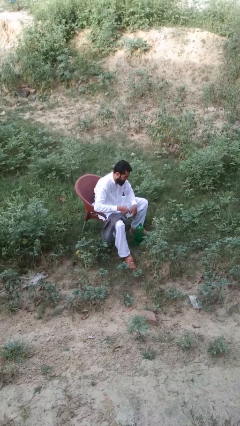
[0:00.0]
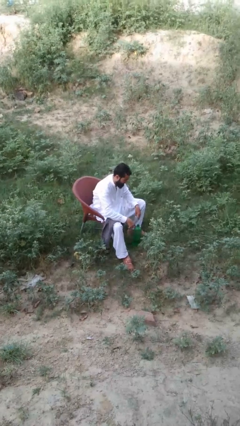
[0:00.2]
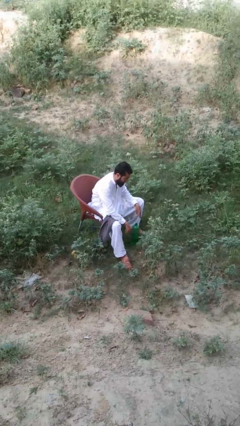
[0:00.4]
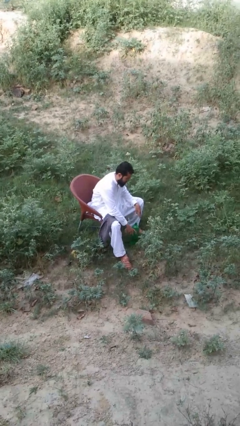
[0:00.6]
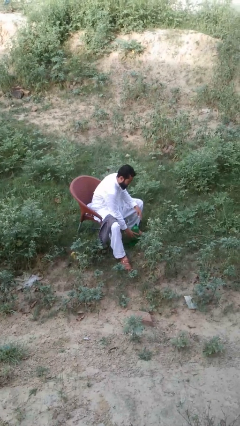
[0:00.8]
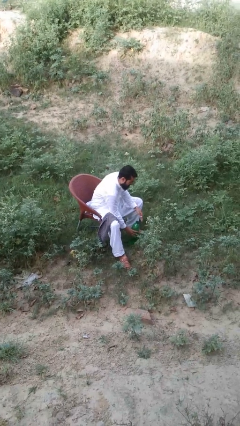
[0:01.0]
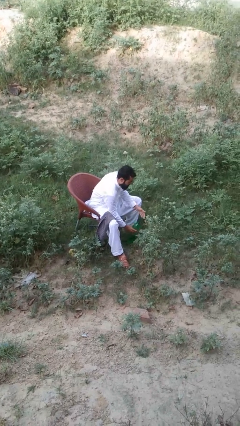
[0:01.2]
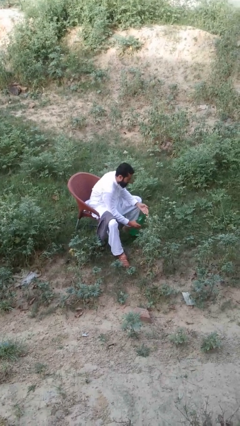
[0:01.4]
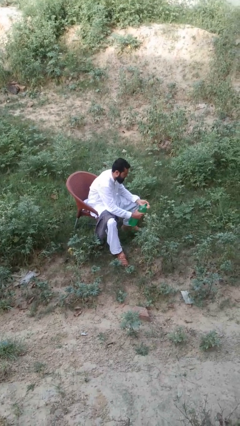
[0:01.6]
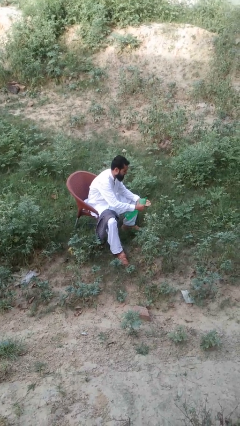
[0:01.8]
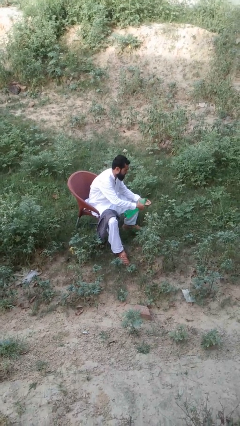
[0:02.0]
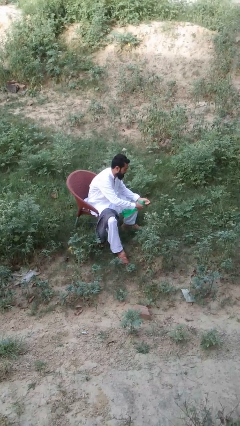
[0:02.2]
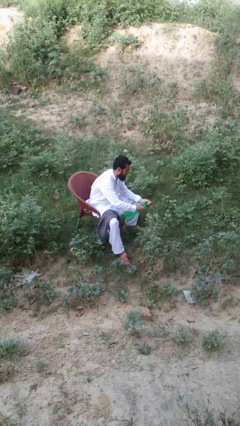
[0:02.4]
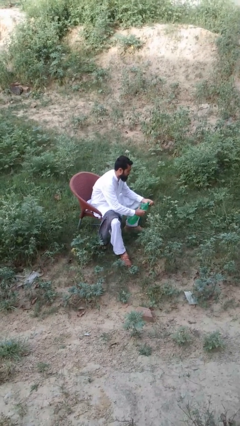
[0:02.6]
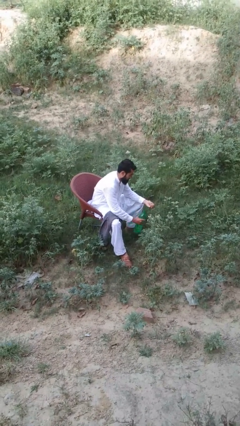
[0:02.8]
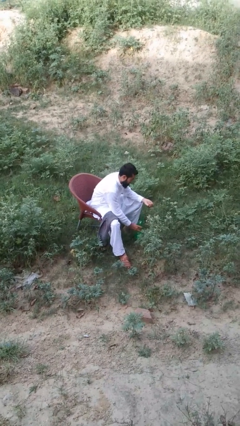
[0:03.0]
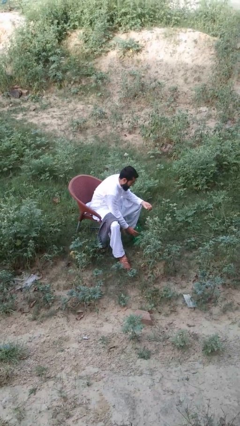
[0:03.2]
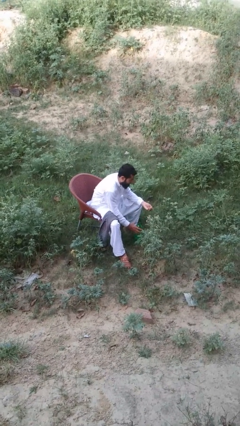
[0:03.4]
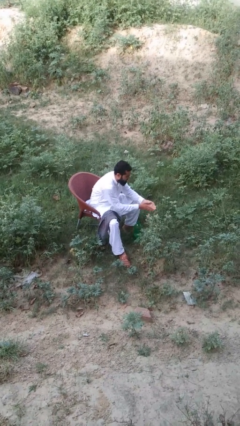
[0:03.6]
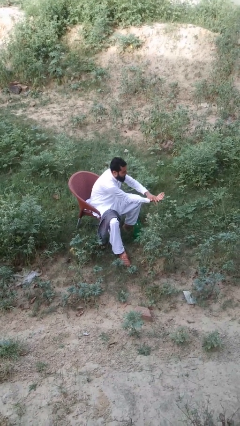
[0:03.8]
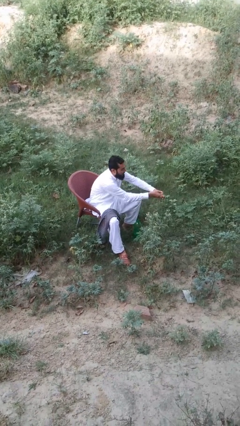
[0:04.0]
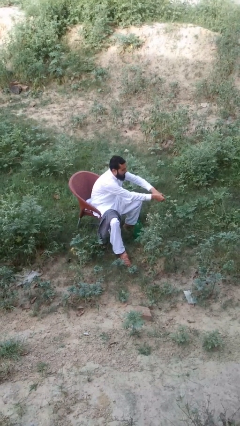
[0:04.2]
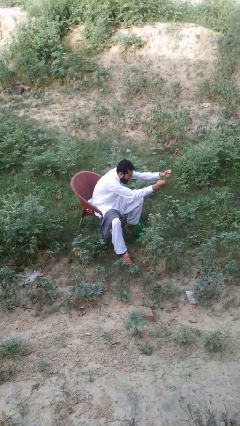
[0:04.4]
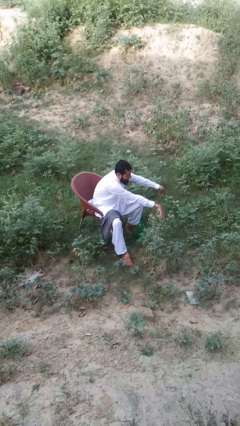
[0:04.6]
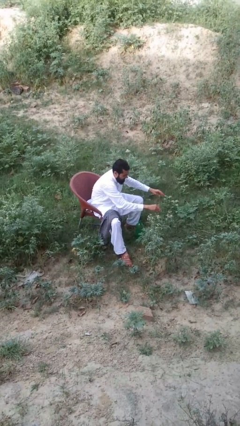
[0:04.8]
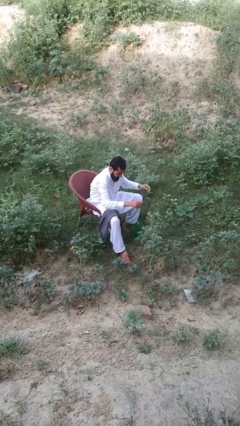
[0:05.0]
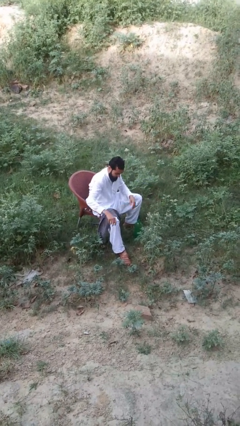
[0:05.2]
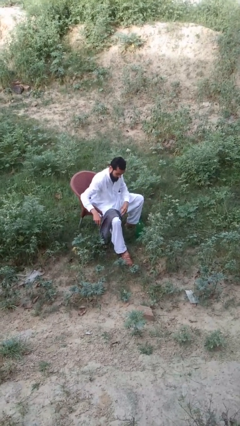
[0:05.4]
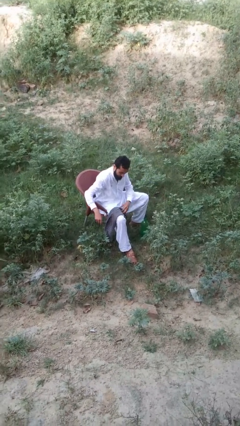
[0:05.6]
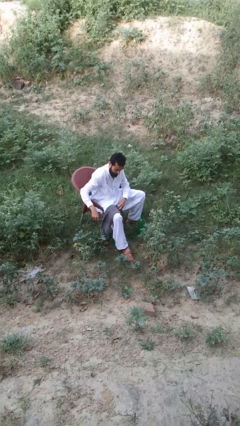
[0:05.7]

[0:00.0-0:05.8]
person washes hands

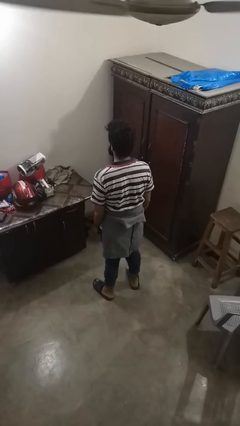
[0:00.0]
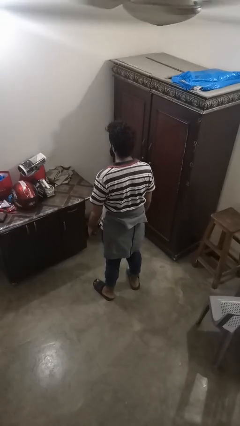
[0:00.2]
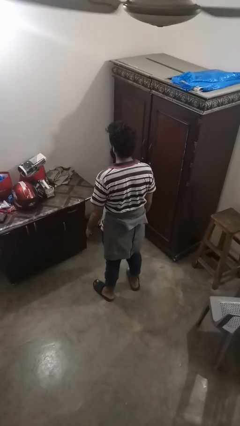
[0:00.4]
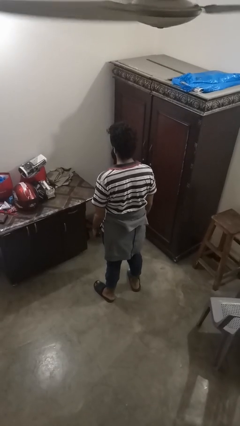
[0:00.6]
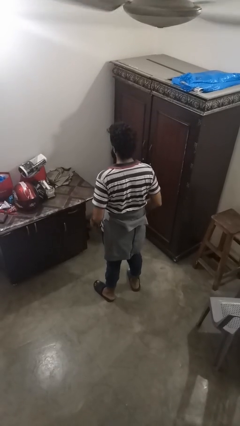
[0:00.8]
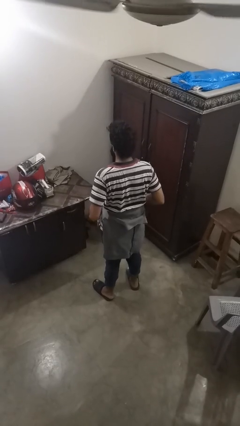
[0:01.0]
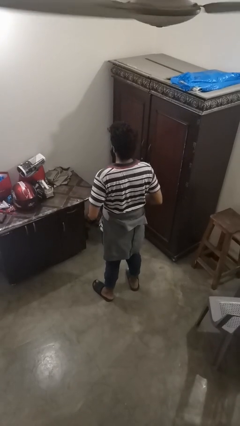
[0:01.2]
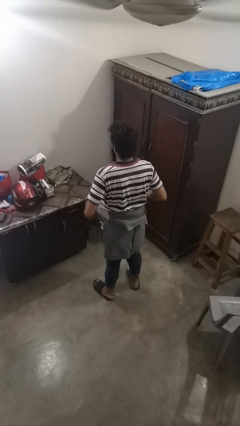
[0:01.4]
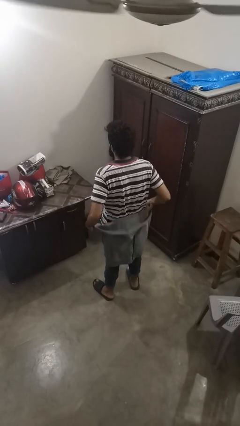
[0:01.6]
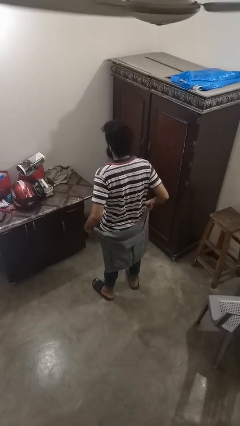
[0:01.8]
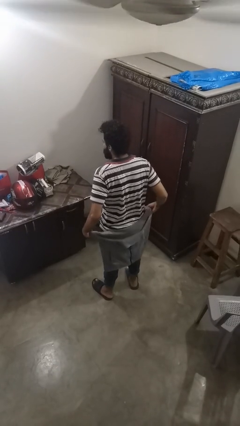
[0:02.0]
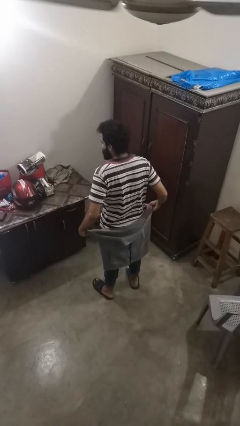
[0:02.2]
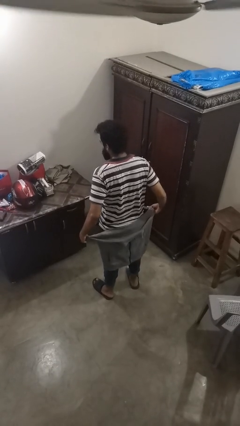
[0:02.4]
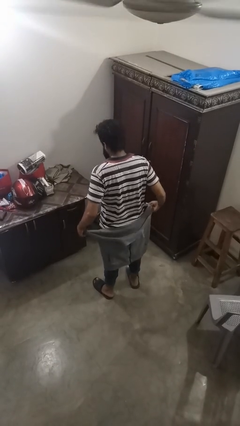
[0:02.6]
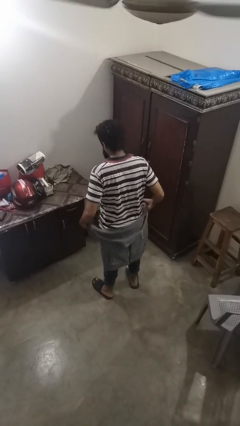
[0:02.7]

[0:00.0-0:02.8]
person unties jacket around waist

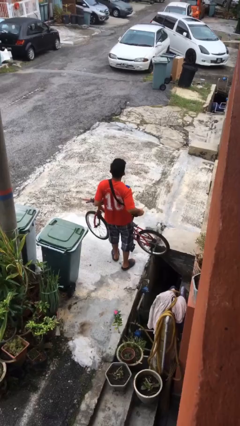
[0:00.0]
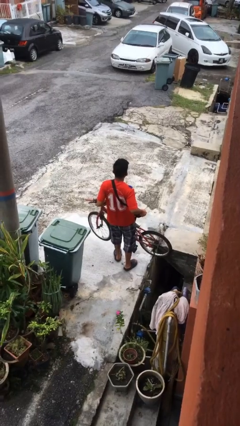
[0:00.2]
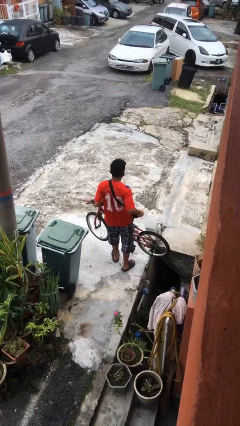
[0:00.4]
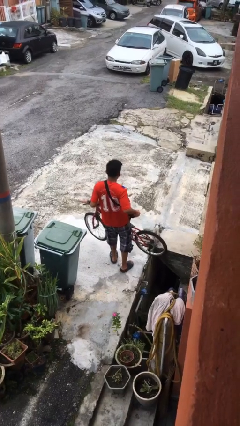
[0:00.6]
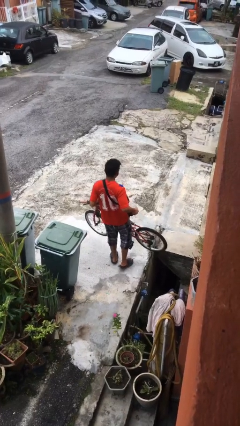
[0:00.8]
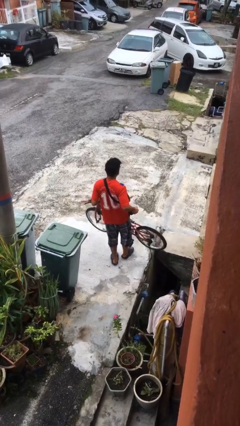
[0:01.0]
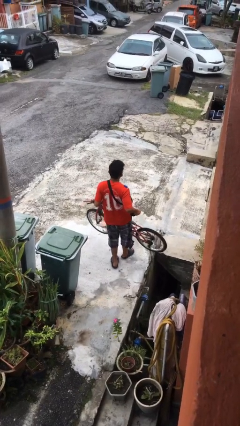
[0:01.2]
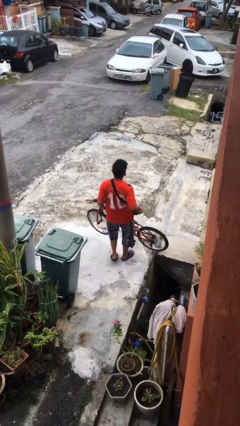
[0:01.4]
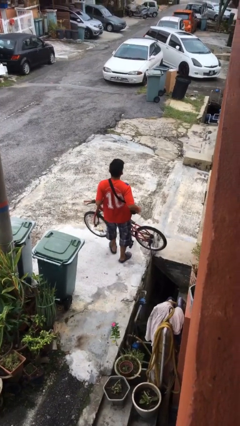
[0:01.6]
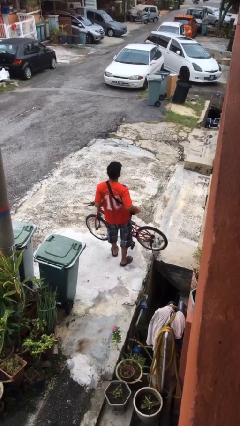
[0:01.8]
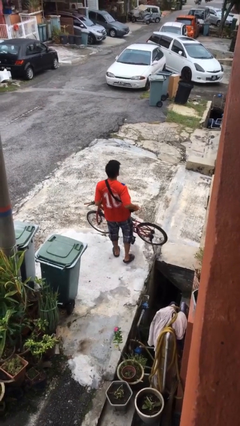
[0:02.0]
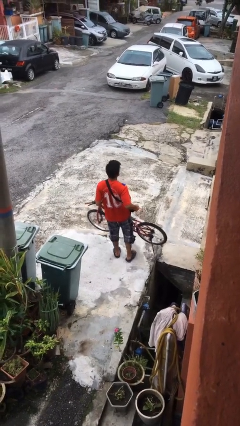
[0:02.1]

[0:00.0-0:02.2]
person carries bicycle

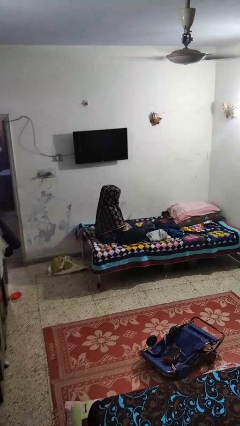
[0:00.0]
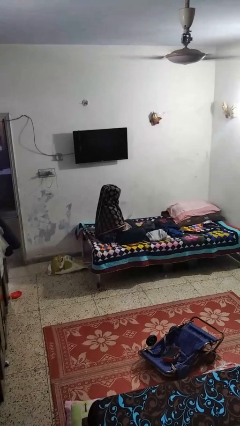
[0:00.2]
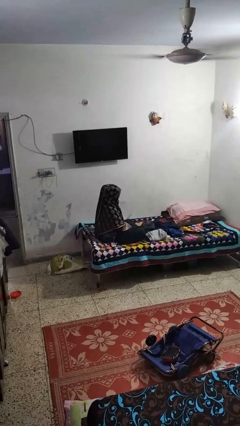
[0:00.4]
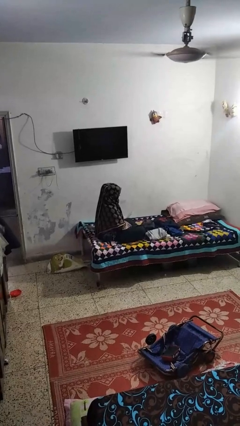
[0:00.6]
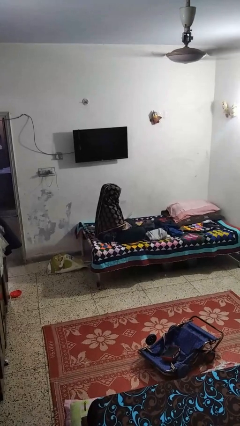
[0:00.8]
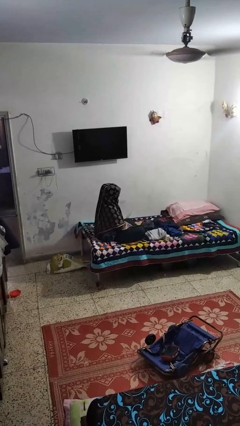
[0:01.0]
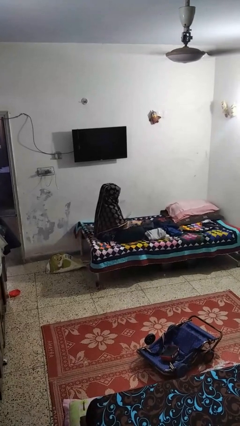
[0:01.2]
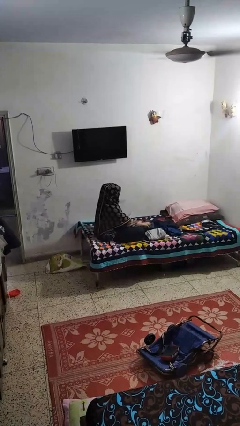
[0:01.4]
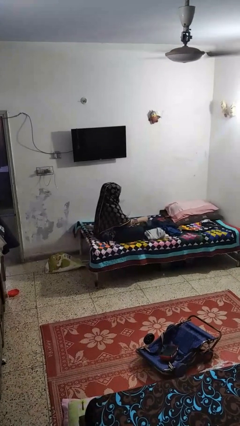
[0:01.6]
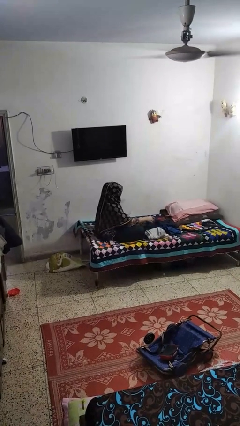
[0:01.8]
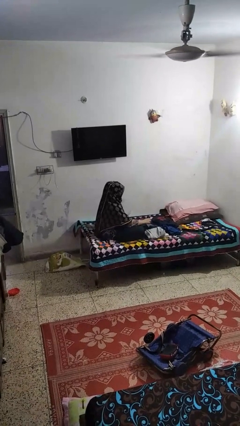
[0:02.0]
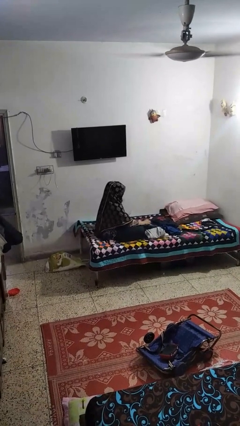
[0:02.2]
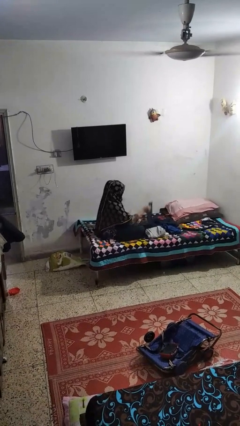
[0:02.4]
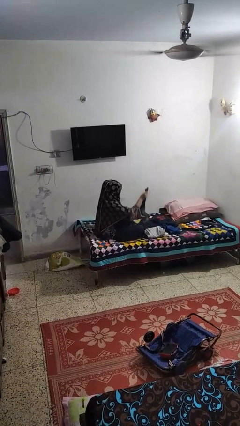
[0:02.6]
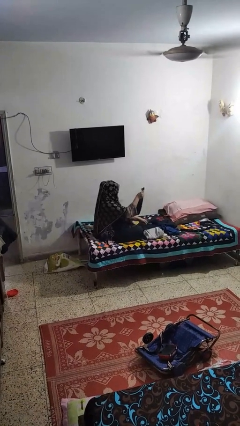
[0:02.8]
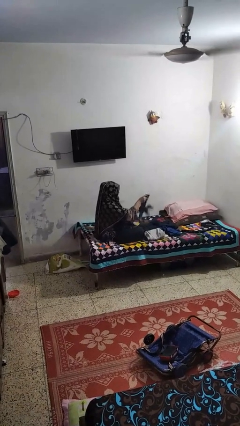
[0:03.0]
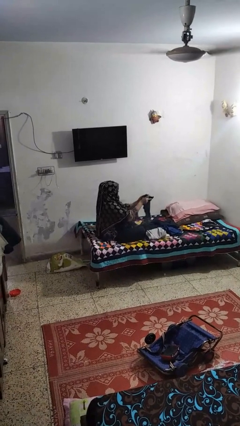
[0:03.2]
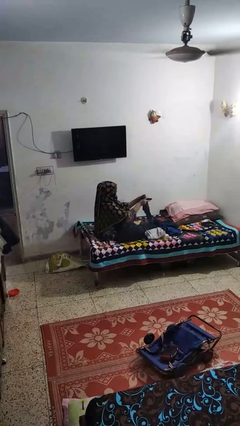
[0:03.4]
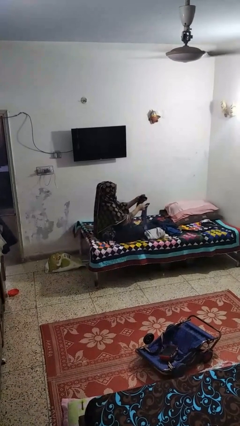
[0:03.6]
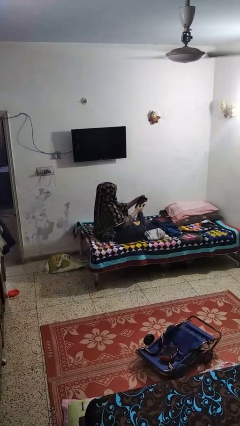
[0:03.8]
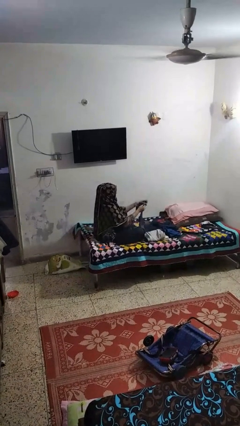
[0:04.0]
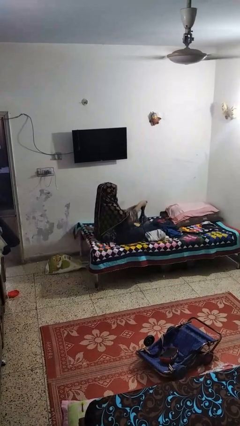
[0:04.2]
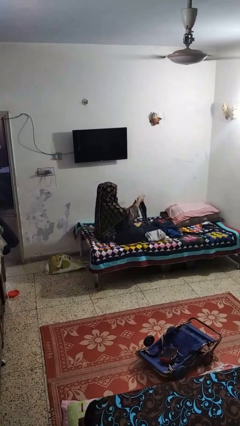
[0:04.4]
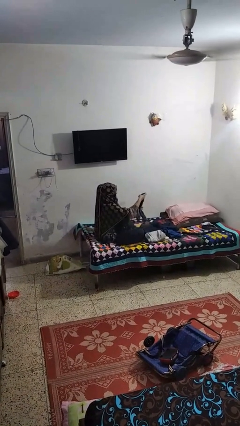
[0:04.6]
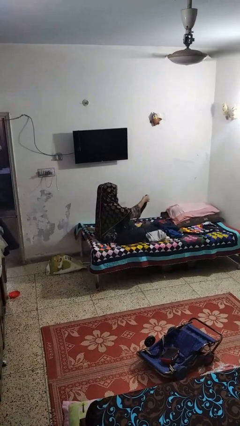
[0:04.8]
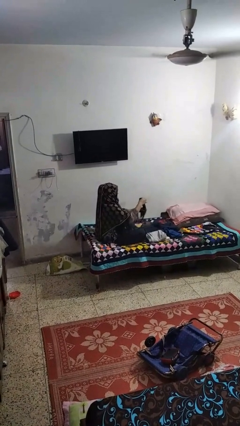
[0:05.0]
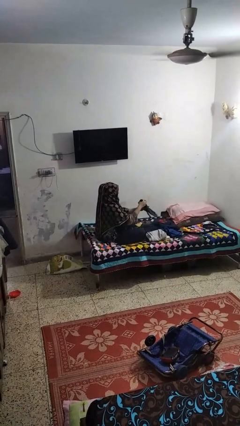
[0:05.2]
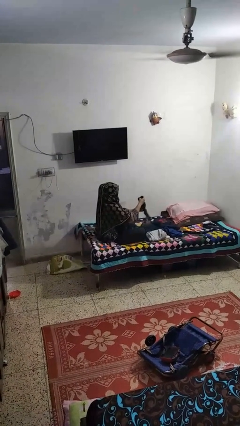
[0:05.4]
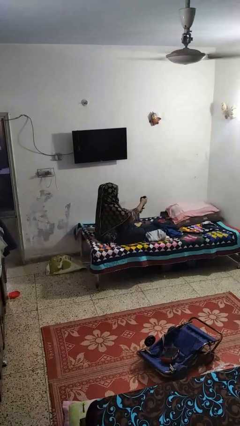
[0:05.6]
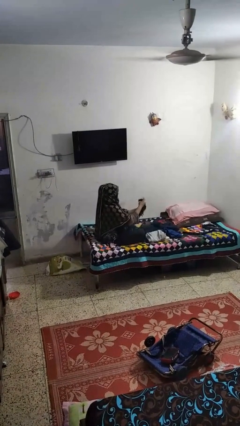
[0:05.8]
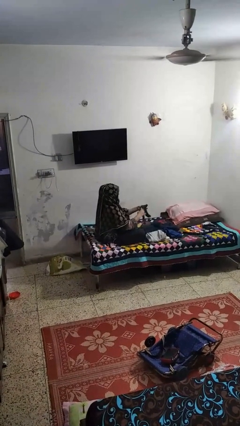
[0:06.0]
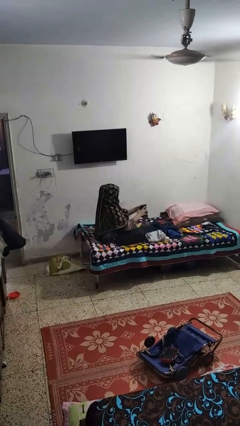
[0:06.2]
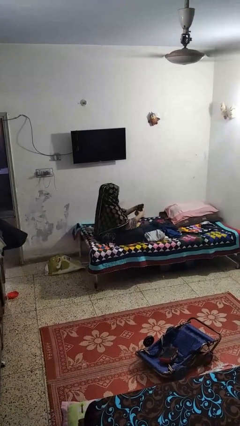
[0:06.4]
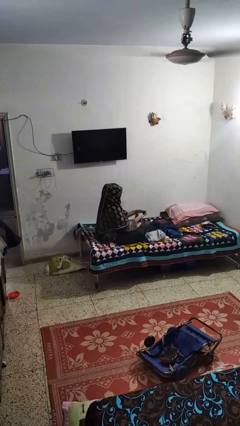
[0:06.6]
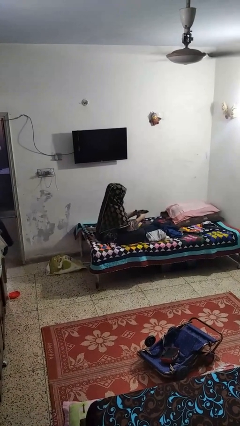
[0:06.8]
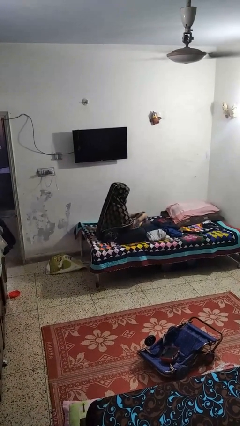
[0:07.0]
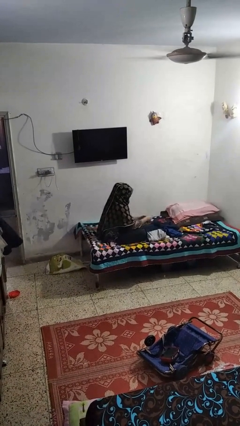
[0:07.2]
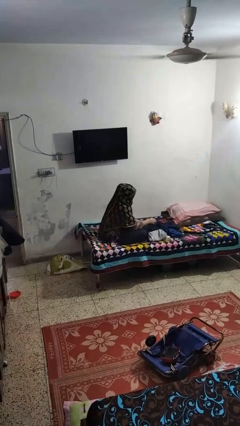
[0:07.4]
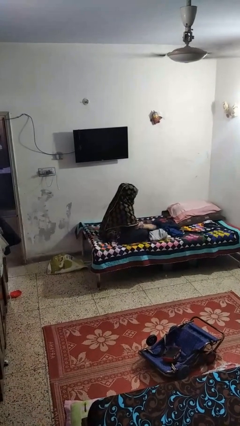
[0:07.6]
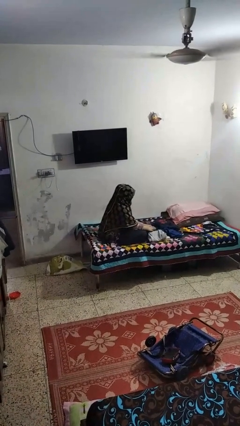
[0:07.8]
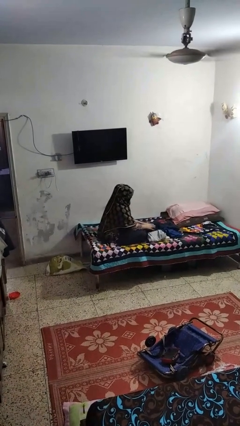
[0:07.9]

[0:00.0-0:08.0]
person folds socks
